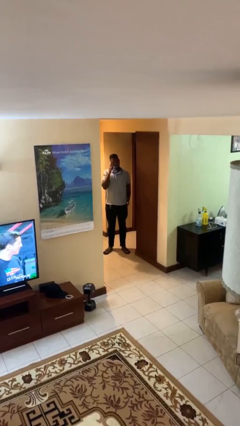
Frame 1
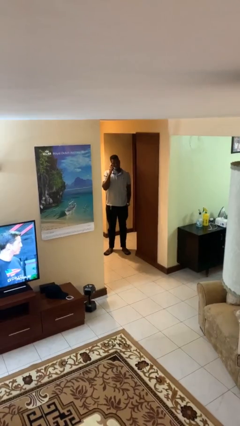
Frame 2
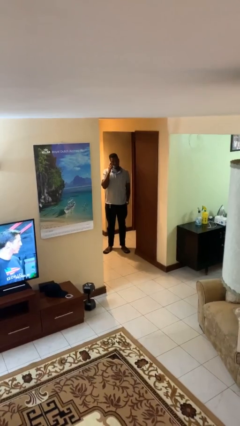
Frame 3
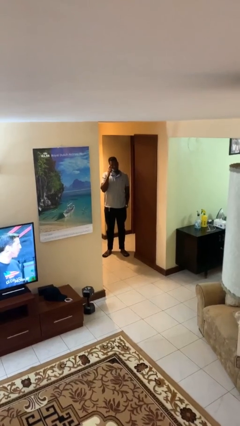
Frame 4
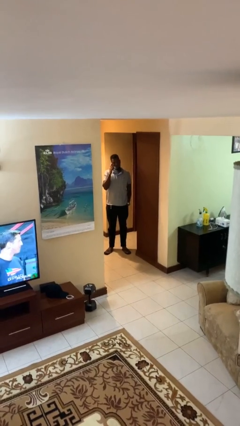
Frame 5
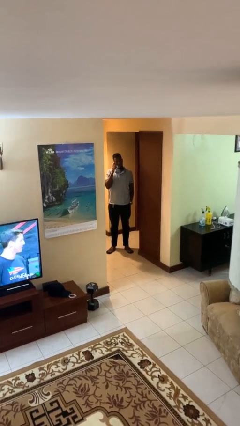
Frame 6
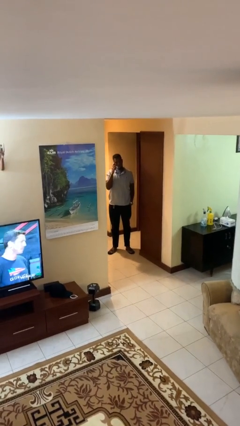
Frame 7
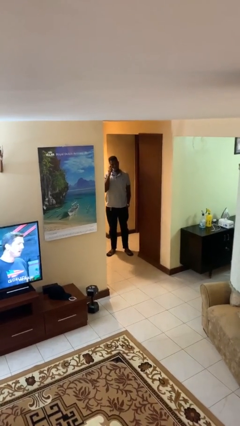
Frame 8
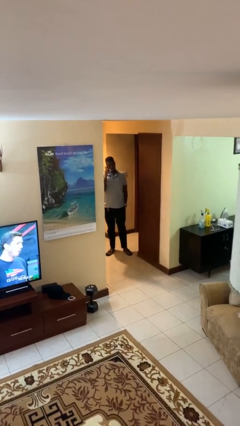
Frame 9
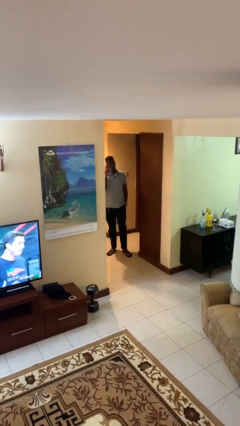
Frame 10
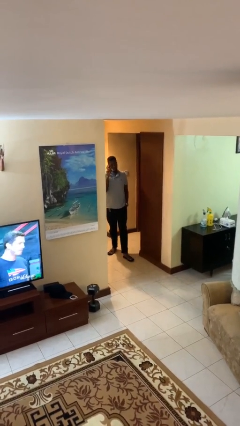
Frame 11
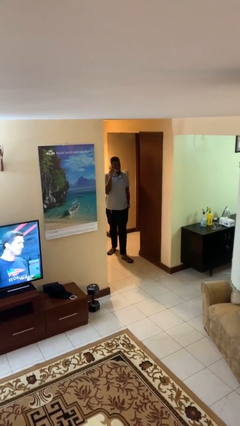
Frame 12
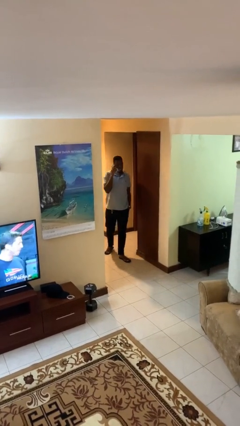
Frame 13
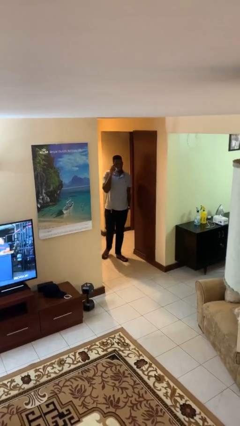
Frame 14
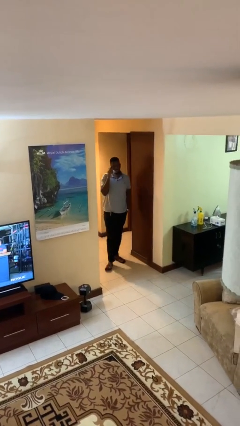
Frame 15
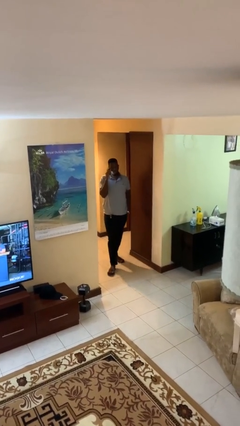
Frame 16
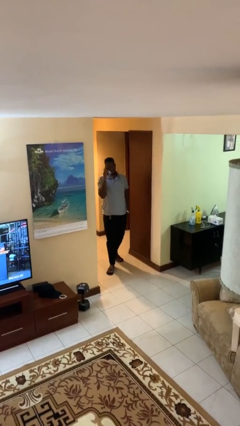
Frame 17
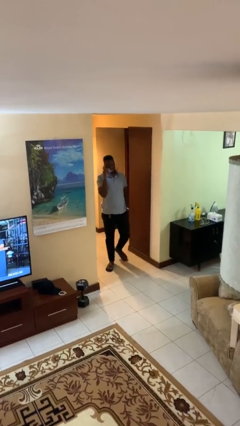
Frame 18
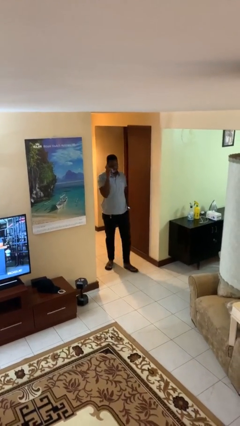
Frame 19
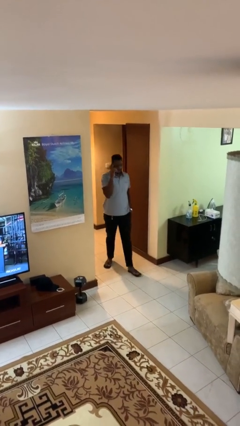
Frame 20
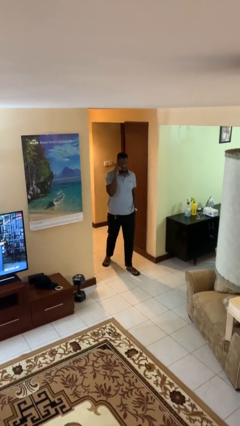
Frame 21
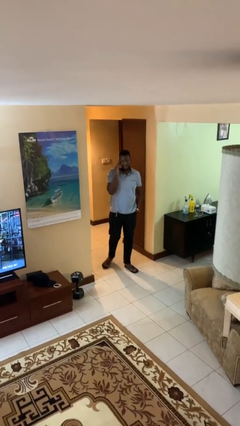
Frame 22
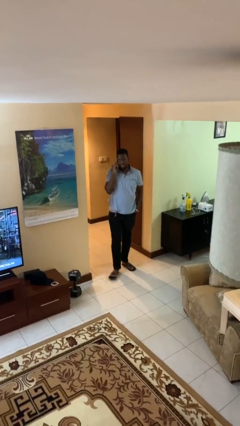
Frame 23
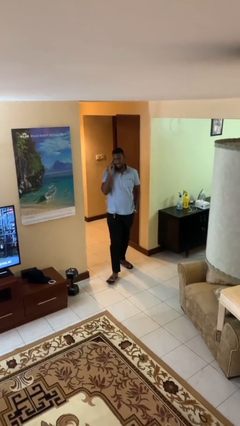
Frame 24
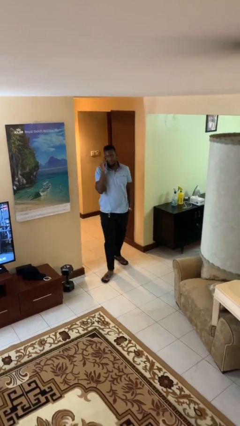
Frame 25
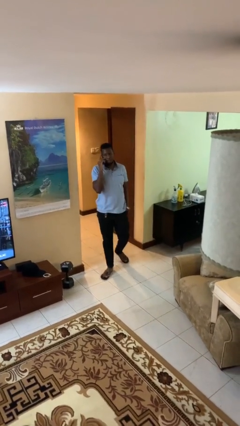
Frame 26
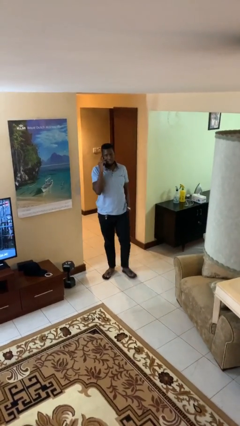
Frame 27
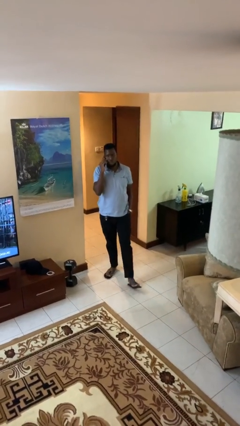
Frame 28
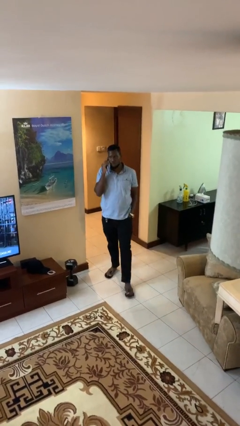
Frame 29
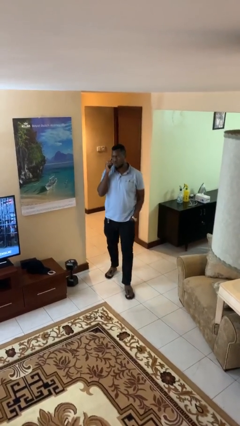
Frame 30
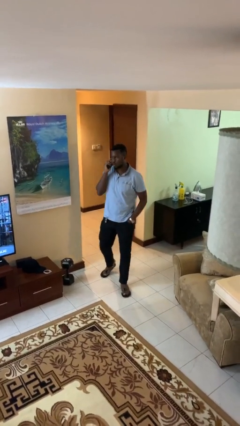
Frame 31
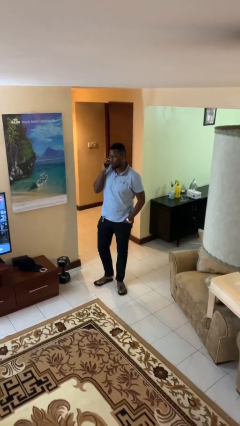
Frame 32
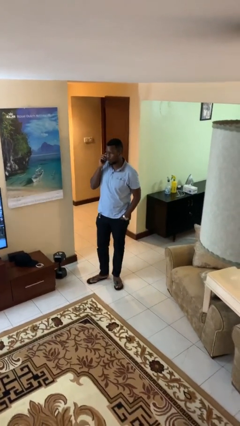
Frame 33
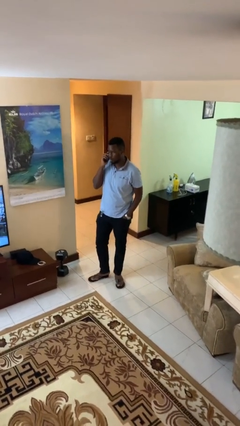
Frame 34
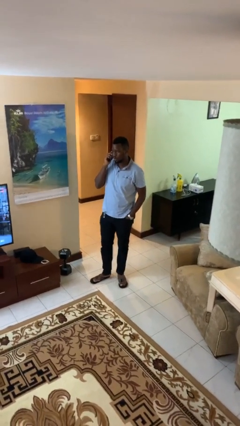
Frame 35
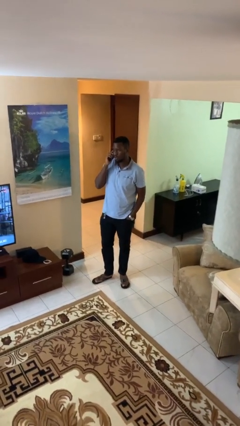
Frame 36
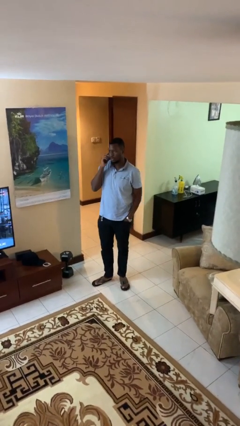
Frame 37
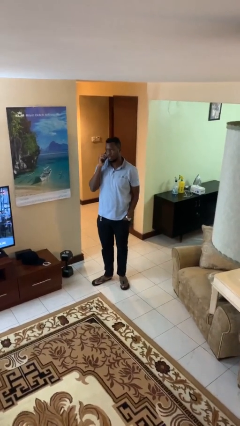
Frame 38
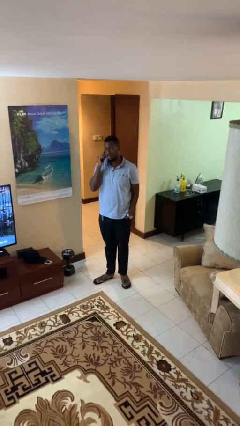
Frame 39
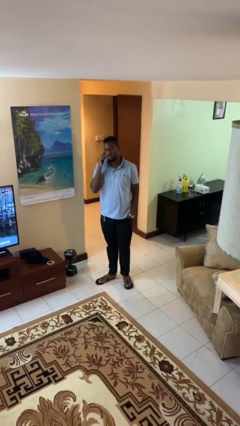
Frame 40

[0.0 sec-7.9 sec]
person enters scene through structure

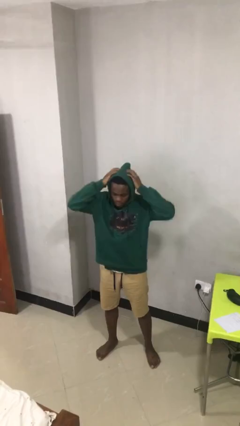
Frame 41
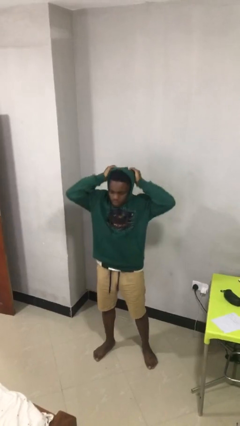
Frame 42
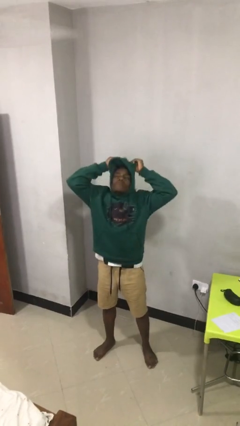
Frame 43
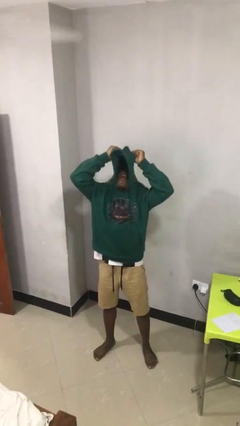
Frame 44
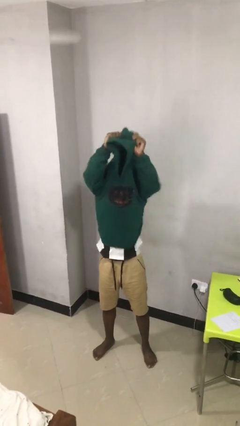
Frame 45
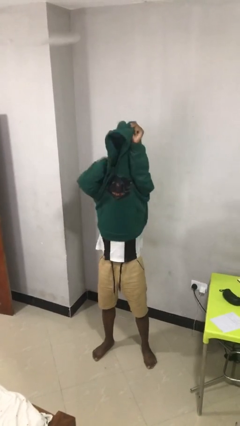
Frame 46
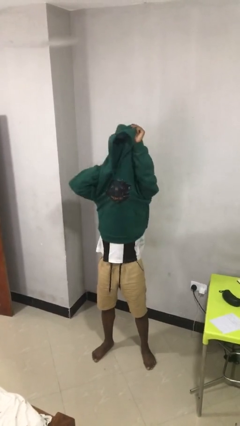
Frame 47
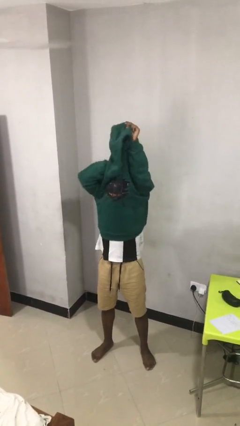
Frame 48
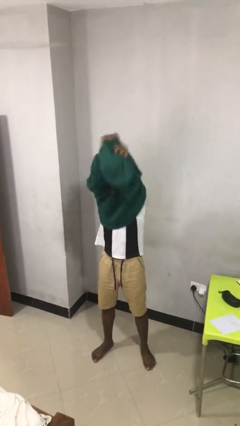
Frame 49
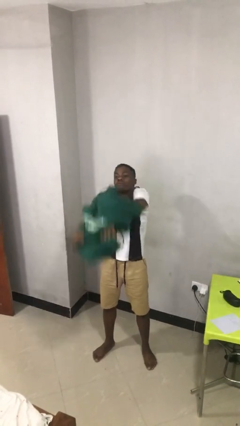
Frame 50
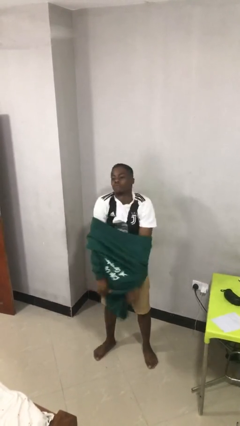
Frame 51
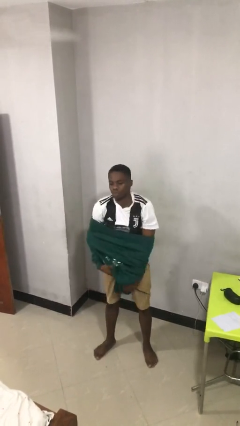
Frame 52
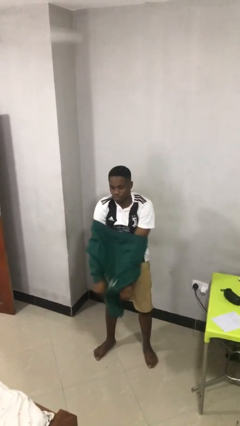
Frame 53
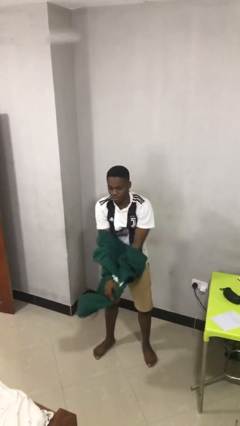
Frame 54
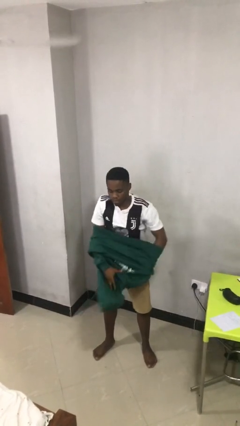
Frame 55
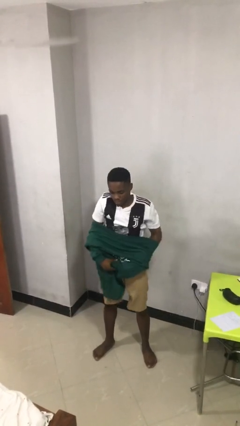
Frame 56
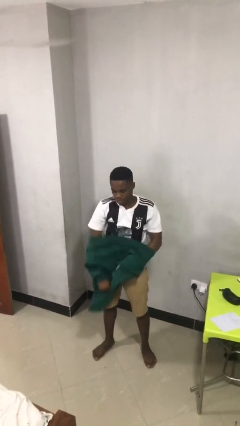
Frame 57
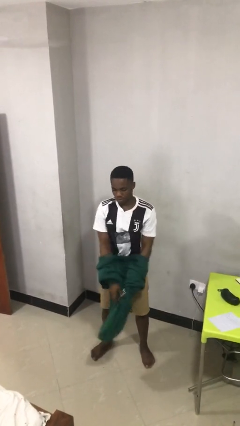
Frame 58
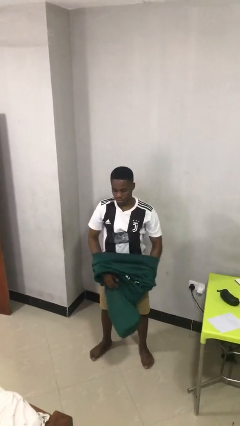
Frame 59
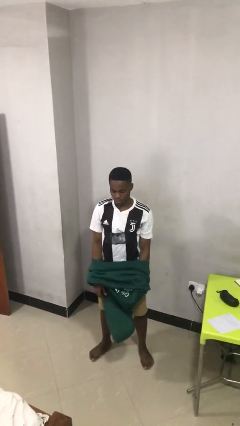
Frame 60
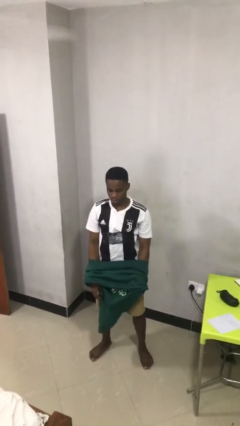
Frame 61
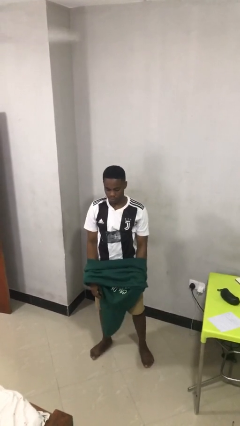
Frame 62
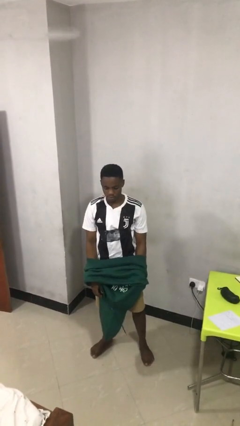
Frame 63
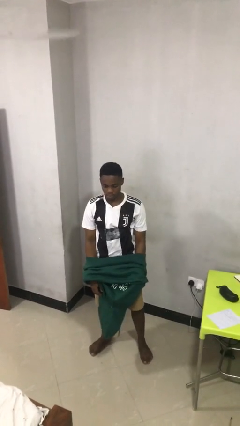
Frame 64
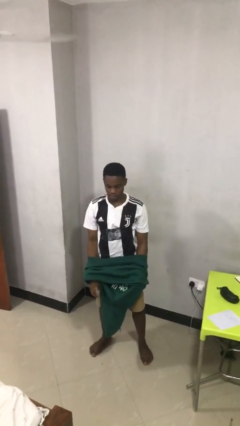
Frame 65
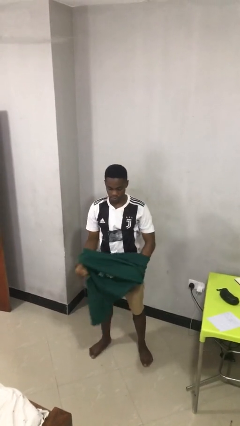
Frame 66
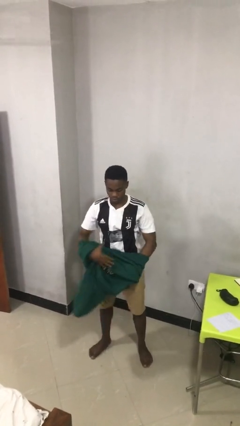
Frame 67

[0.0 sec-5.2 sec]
person takes off hoodie

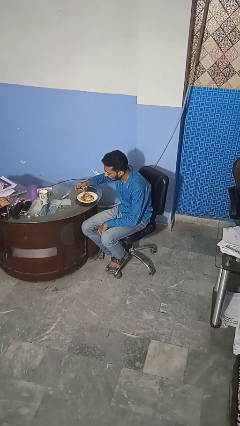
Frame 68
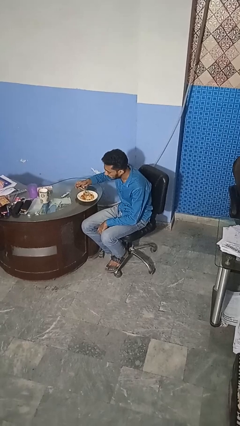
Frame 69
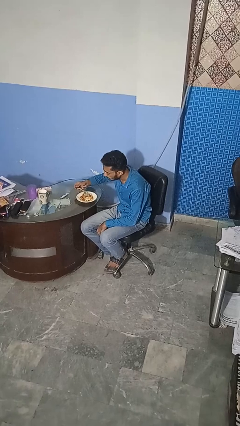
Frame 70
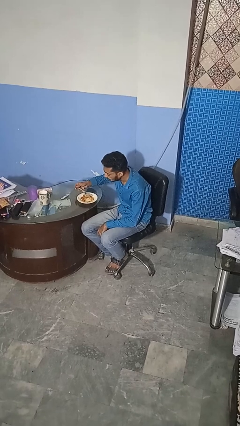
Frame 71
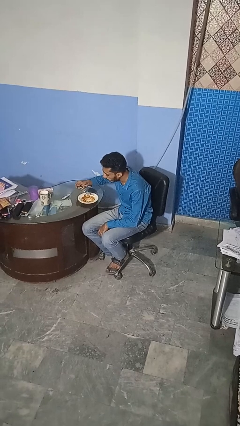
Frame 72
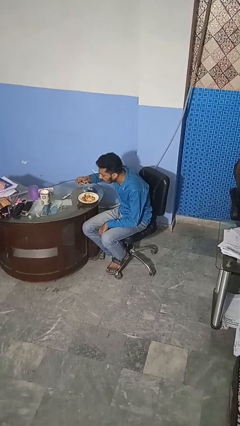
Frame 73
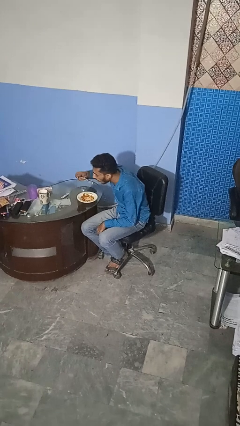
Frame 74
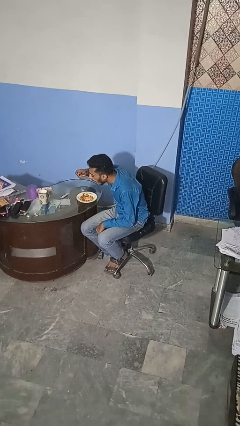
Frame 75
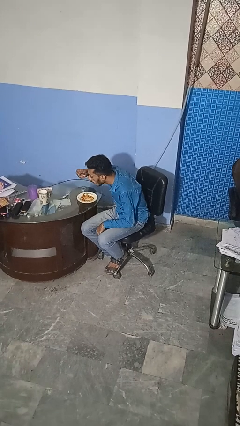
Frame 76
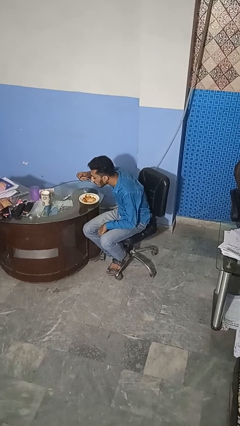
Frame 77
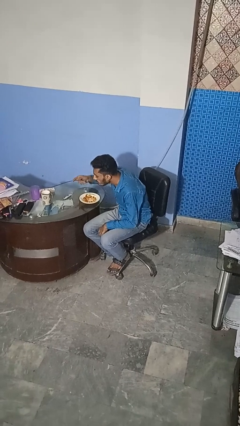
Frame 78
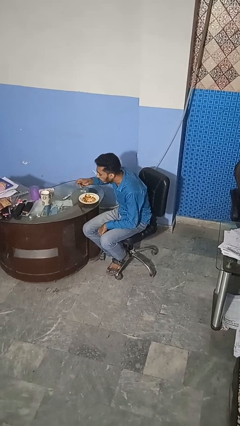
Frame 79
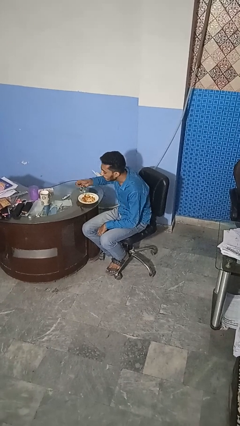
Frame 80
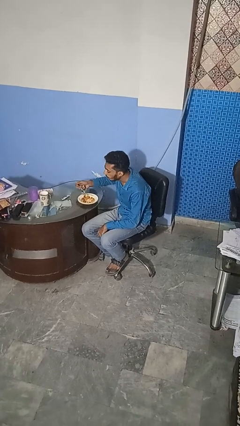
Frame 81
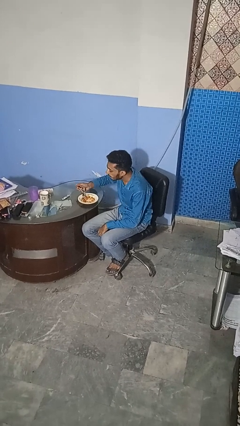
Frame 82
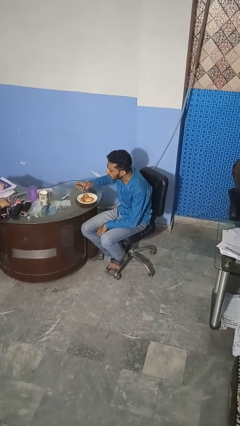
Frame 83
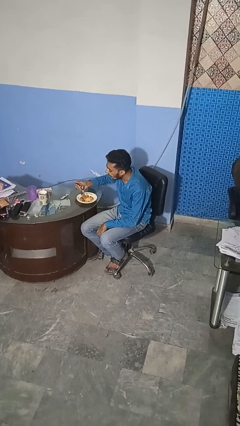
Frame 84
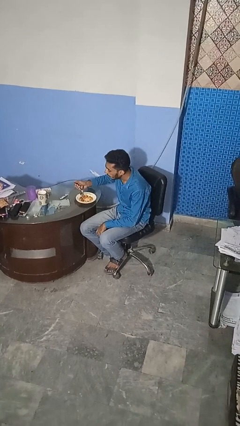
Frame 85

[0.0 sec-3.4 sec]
person eats with utensil

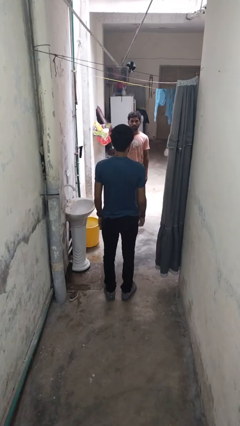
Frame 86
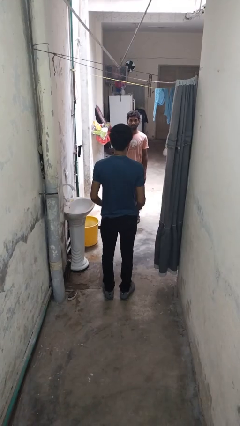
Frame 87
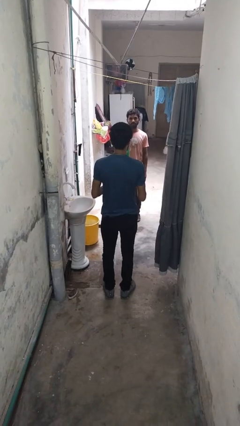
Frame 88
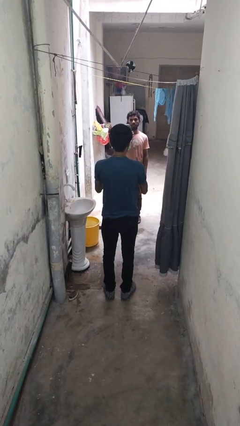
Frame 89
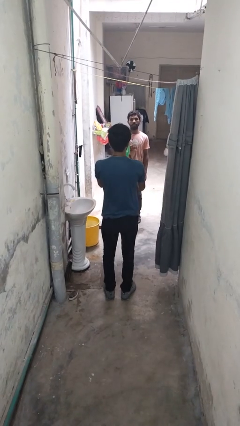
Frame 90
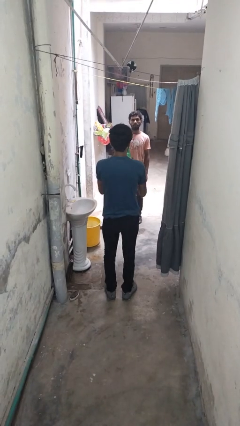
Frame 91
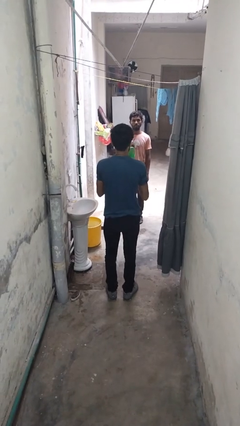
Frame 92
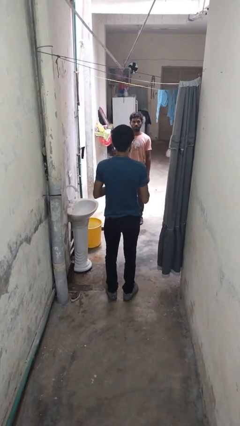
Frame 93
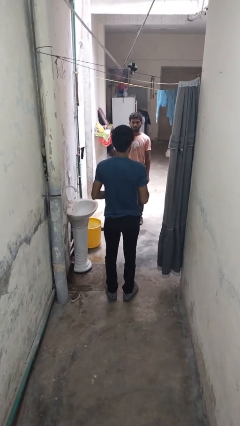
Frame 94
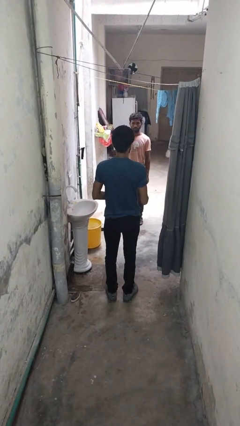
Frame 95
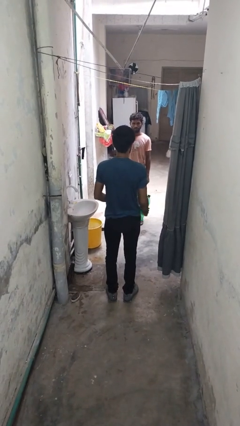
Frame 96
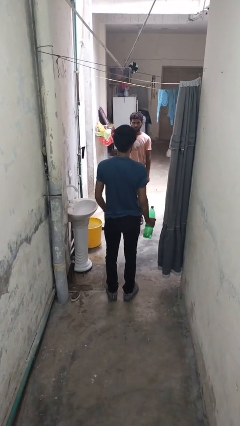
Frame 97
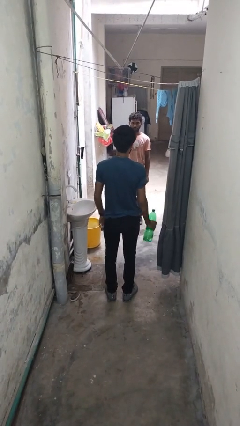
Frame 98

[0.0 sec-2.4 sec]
person catches object from person
